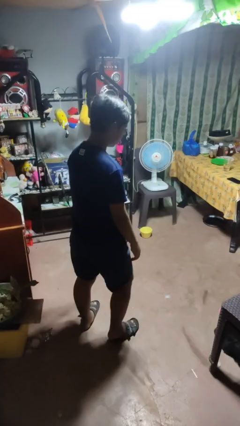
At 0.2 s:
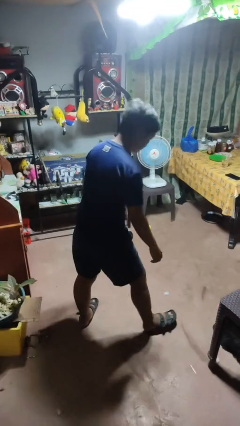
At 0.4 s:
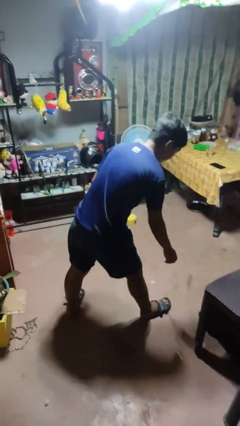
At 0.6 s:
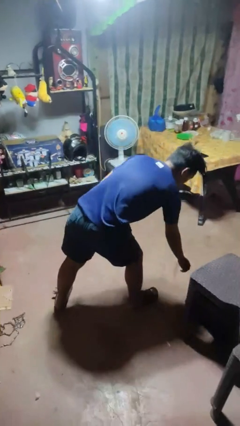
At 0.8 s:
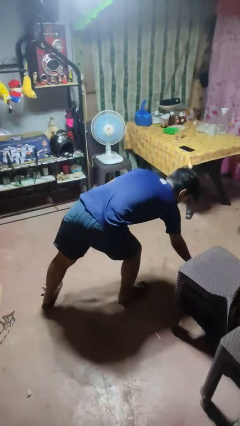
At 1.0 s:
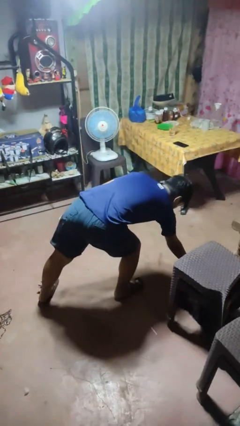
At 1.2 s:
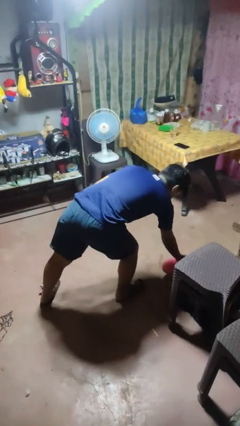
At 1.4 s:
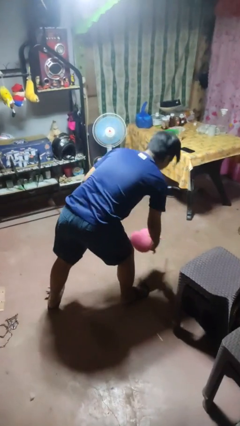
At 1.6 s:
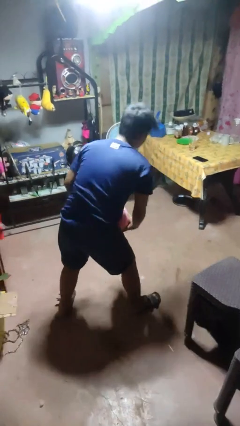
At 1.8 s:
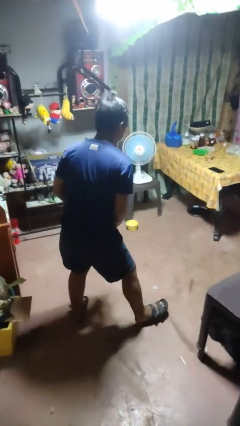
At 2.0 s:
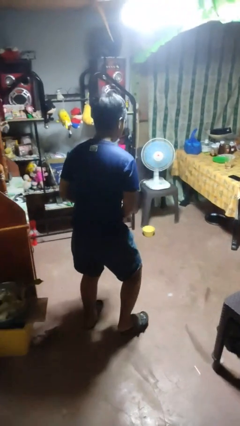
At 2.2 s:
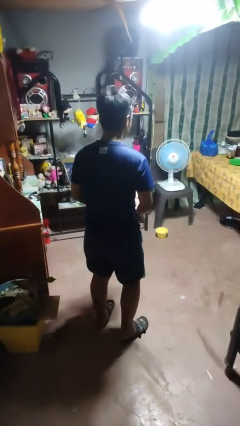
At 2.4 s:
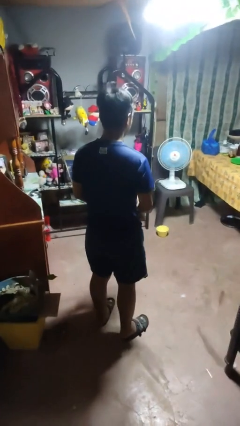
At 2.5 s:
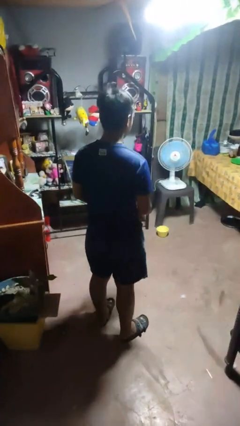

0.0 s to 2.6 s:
person picks up object from floor

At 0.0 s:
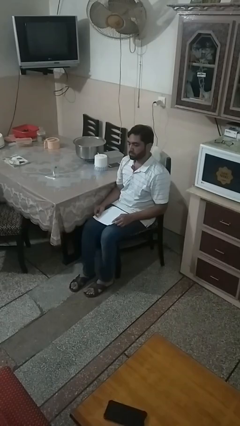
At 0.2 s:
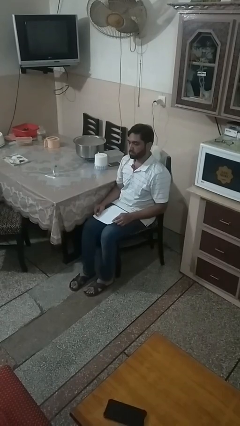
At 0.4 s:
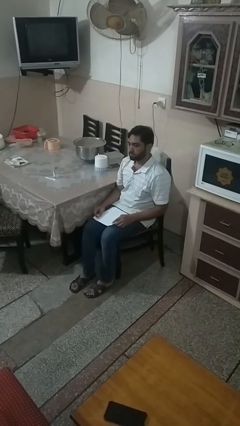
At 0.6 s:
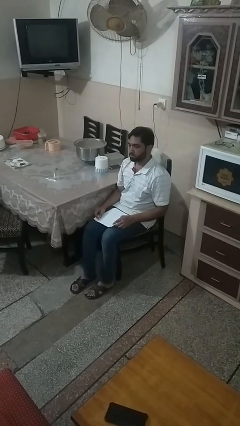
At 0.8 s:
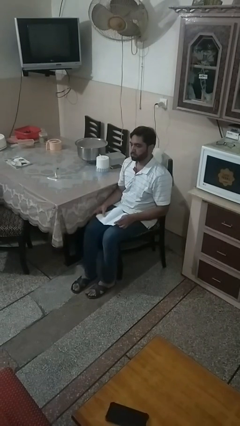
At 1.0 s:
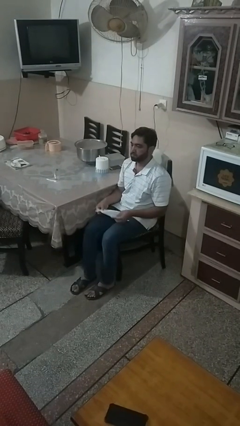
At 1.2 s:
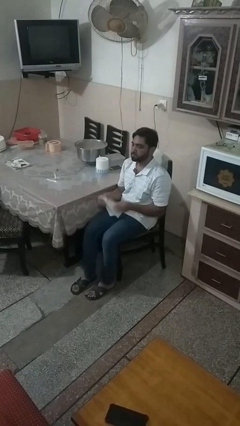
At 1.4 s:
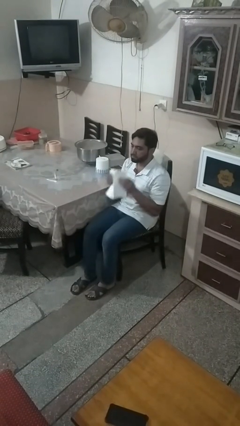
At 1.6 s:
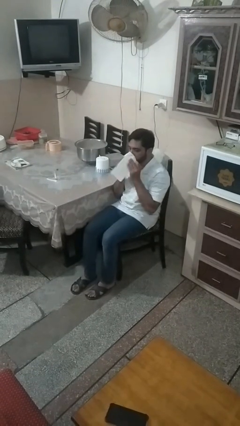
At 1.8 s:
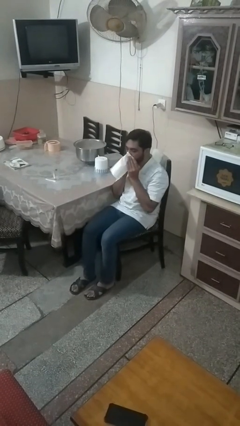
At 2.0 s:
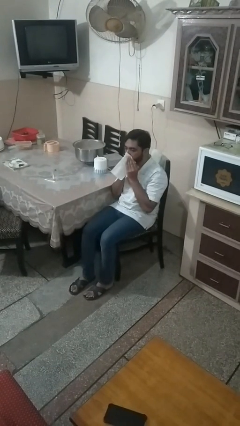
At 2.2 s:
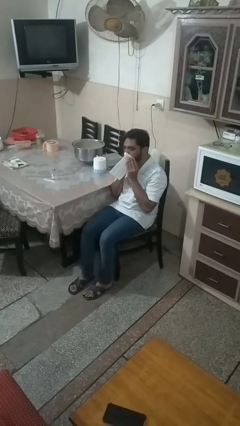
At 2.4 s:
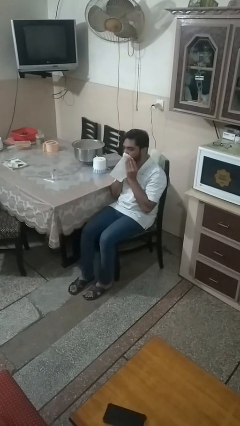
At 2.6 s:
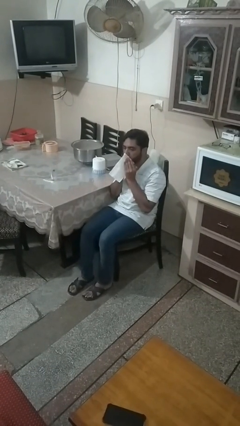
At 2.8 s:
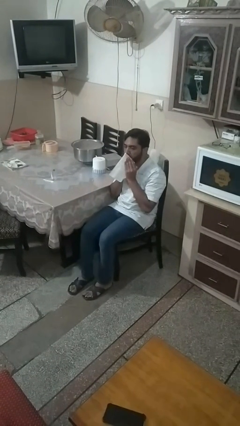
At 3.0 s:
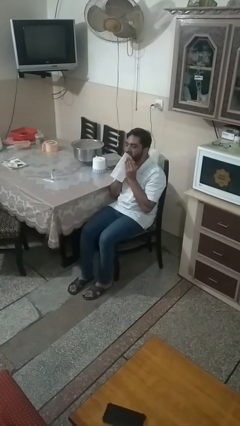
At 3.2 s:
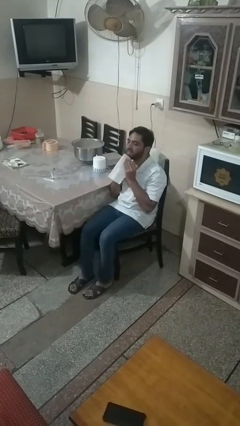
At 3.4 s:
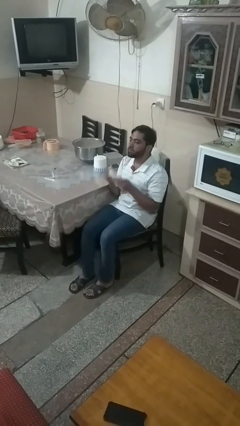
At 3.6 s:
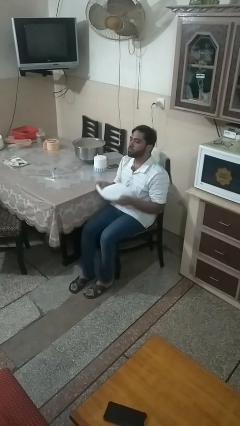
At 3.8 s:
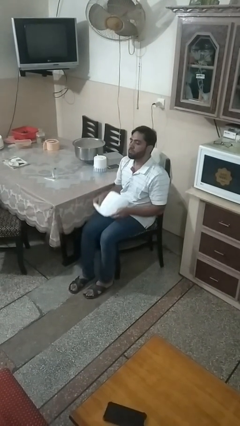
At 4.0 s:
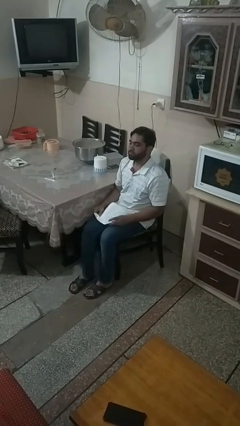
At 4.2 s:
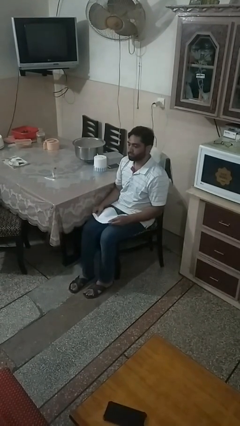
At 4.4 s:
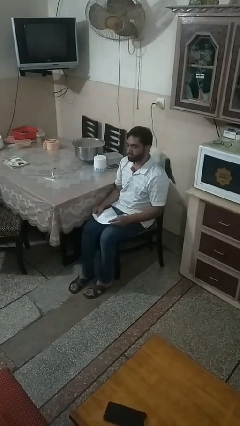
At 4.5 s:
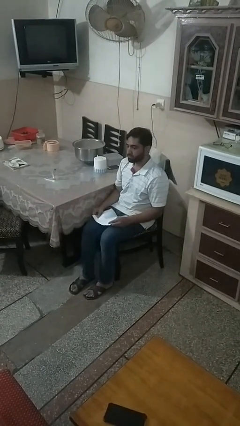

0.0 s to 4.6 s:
person wipes mouth with napkin

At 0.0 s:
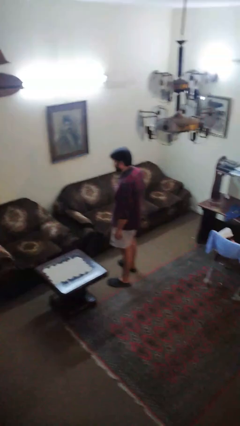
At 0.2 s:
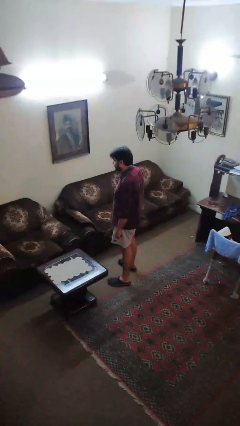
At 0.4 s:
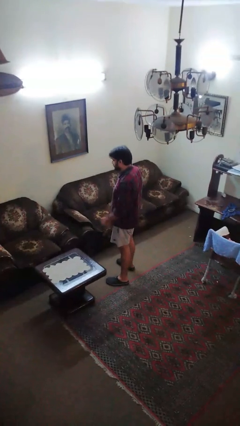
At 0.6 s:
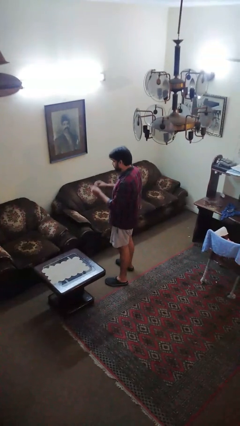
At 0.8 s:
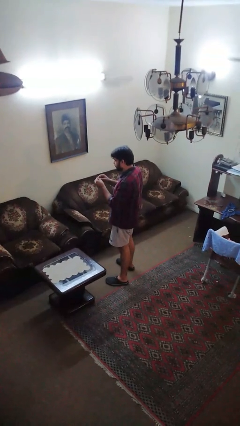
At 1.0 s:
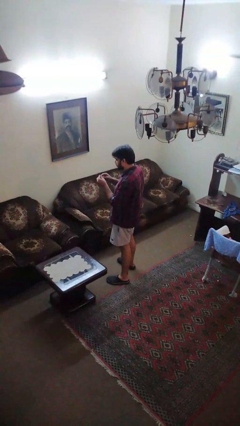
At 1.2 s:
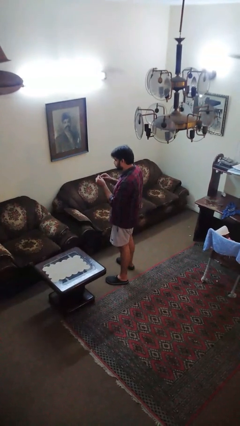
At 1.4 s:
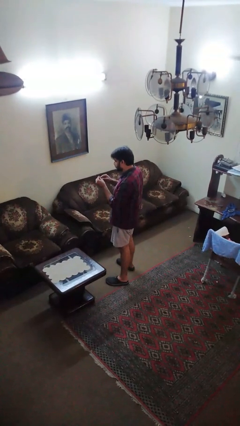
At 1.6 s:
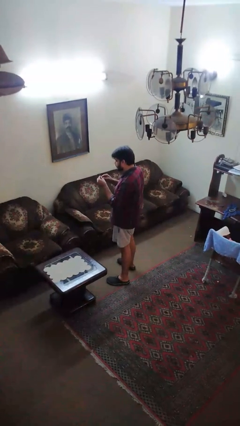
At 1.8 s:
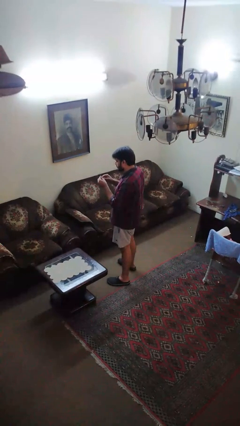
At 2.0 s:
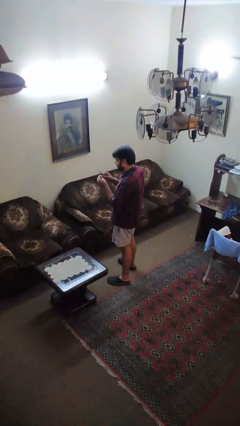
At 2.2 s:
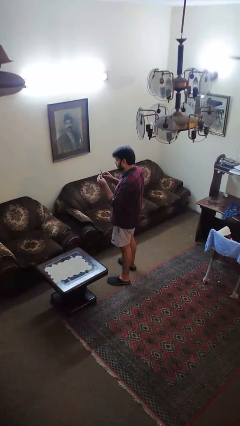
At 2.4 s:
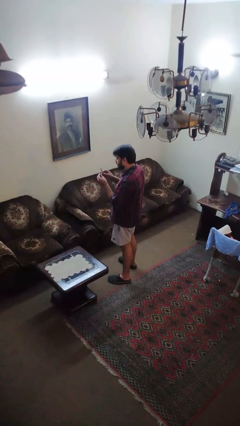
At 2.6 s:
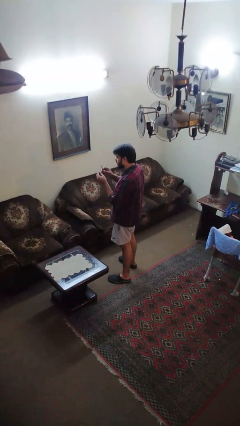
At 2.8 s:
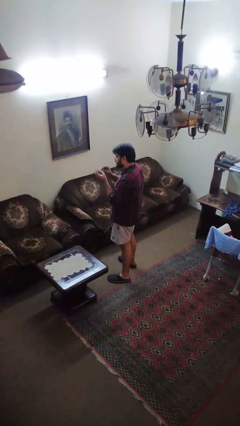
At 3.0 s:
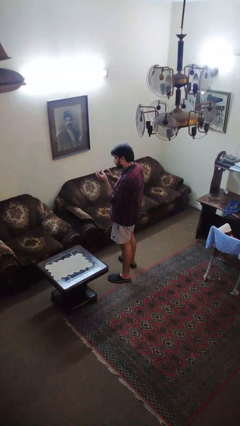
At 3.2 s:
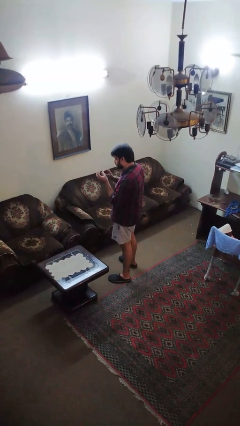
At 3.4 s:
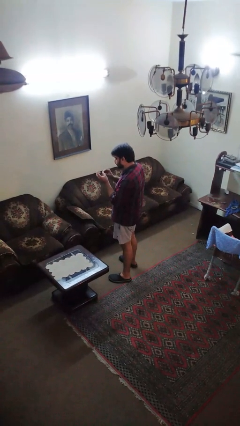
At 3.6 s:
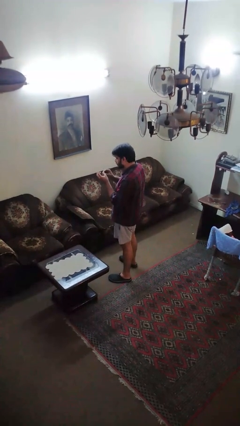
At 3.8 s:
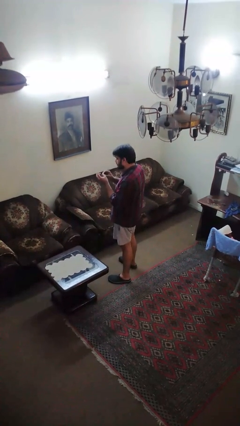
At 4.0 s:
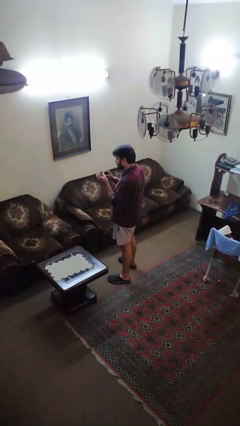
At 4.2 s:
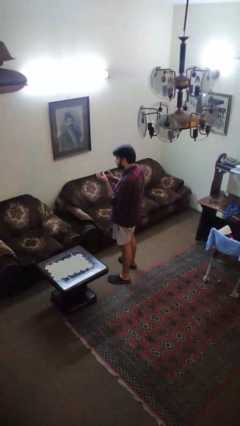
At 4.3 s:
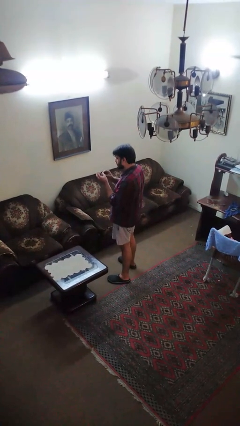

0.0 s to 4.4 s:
person files fingernails

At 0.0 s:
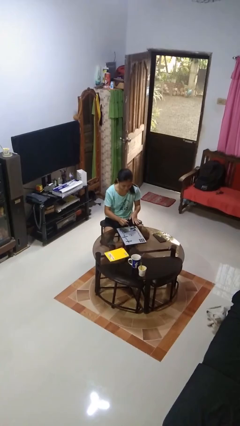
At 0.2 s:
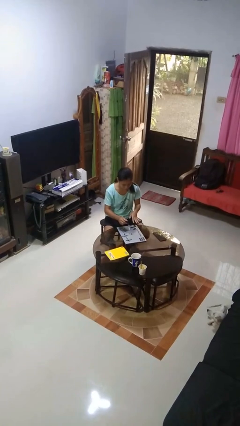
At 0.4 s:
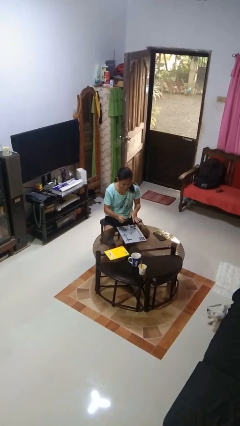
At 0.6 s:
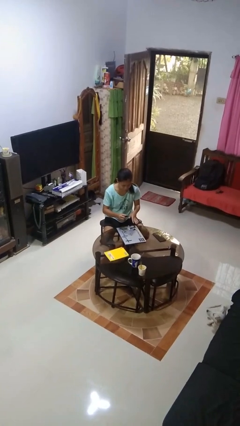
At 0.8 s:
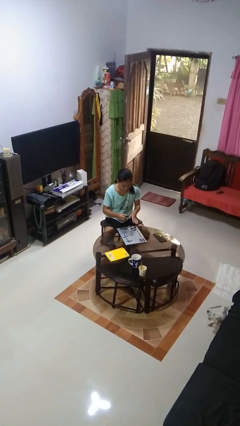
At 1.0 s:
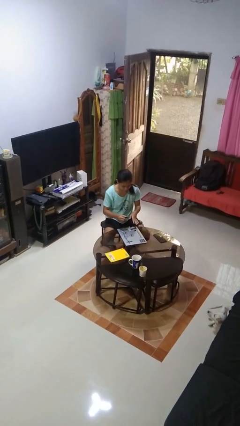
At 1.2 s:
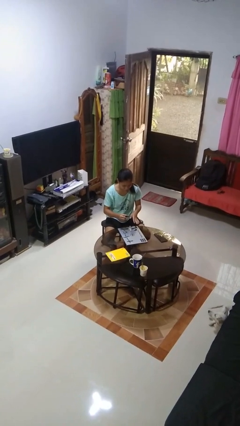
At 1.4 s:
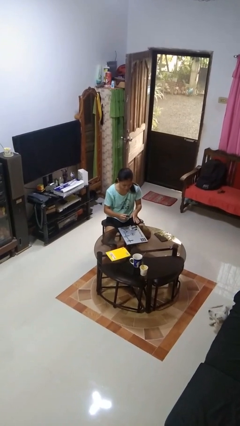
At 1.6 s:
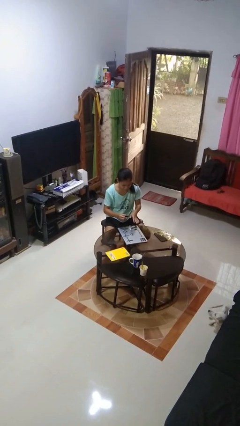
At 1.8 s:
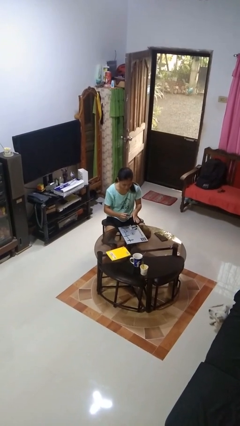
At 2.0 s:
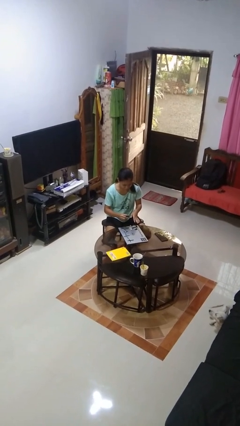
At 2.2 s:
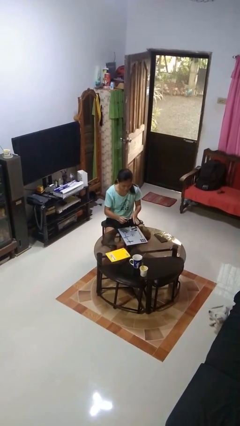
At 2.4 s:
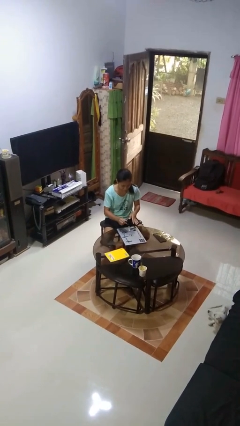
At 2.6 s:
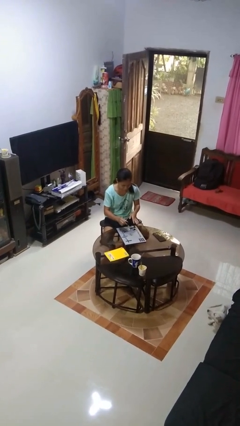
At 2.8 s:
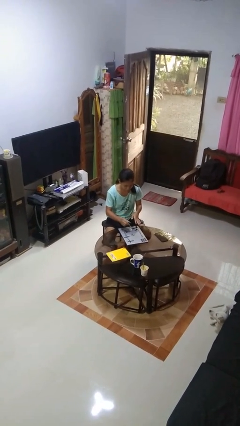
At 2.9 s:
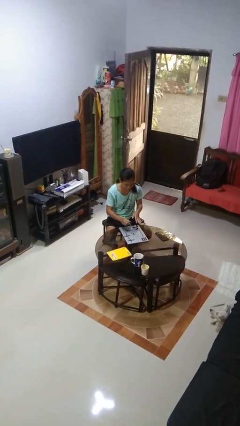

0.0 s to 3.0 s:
person paints fingernails

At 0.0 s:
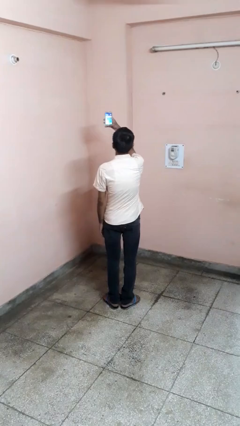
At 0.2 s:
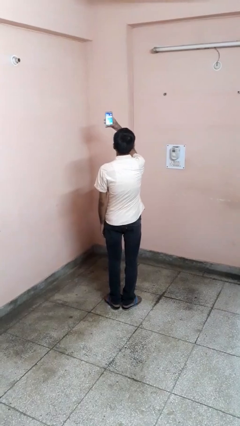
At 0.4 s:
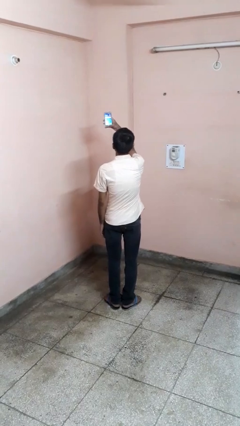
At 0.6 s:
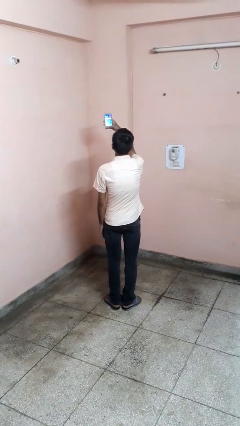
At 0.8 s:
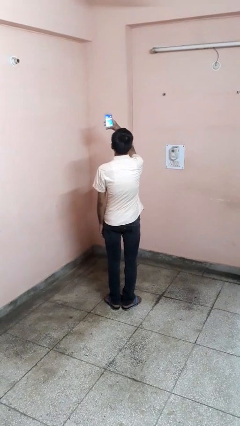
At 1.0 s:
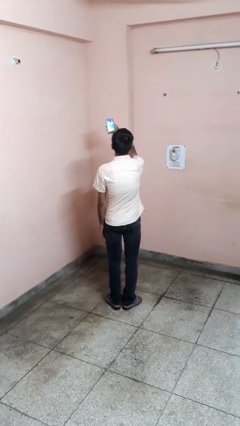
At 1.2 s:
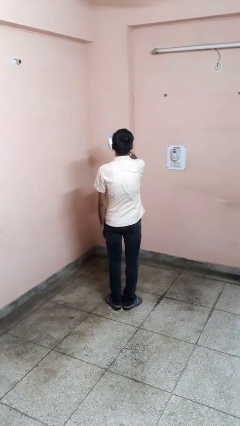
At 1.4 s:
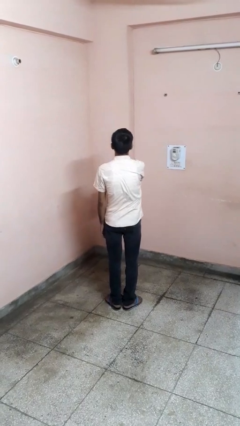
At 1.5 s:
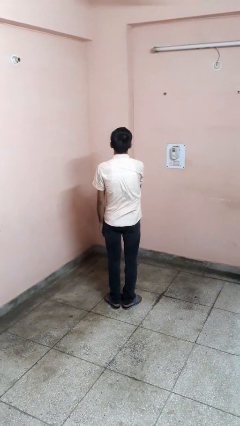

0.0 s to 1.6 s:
person takes selfie

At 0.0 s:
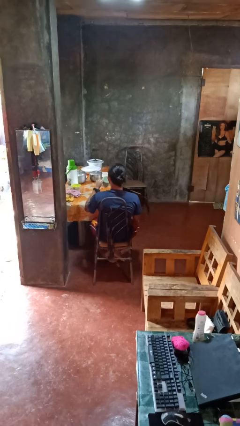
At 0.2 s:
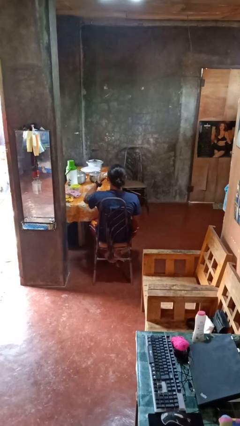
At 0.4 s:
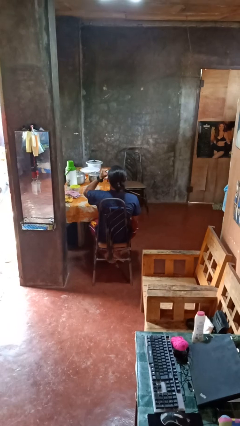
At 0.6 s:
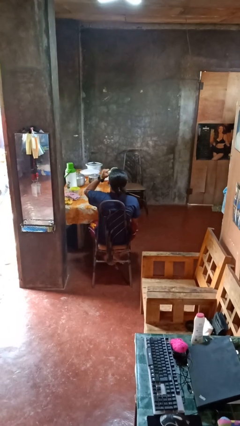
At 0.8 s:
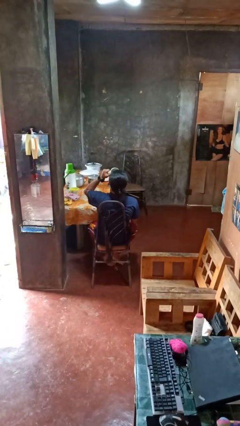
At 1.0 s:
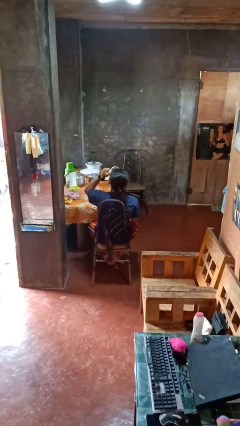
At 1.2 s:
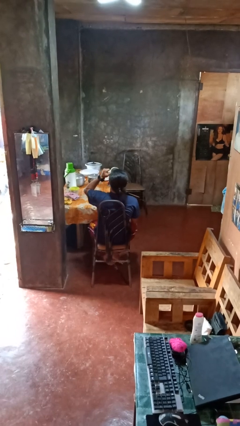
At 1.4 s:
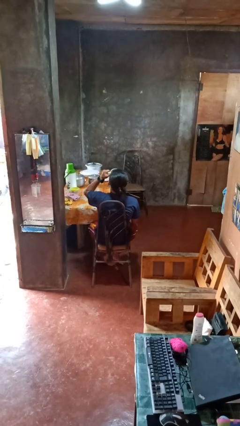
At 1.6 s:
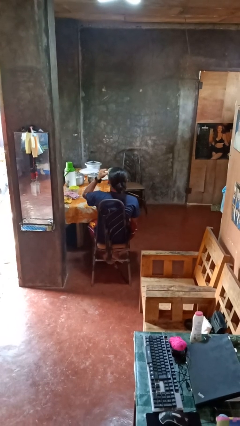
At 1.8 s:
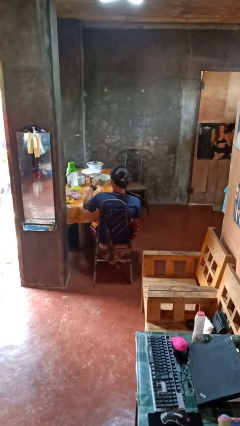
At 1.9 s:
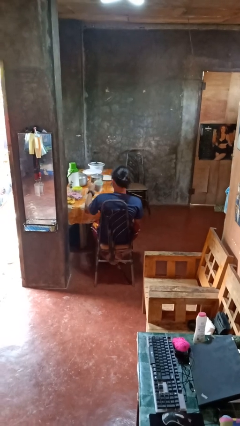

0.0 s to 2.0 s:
person drinks from mug
